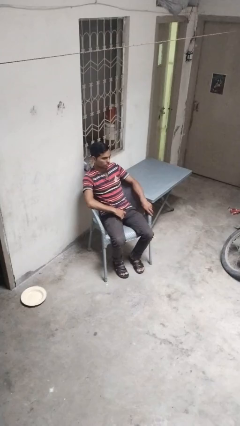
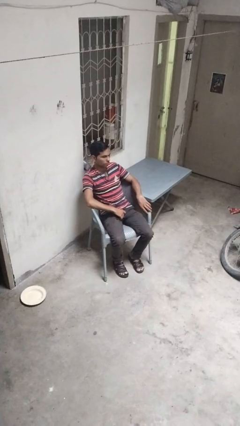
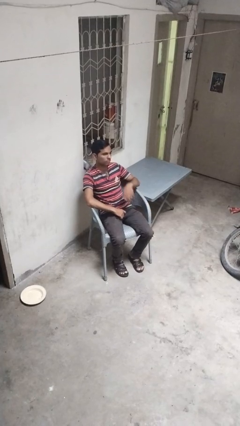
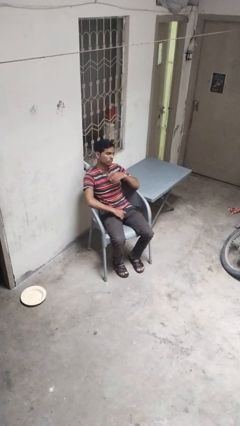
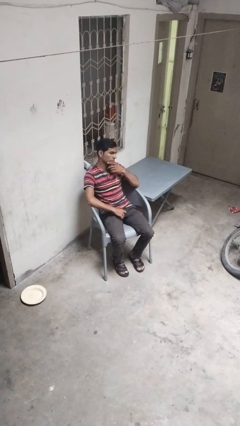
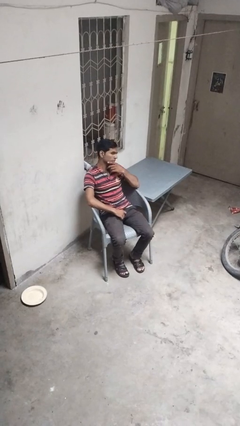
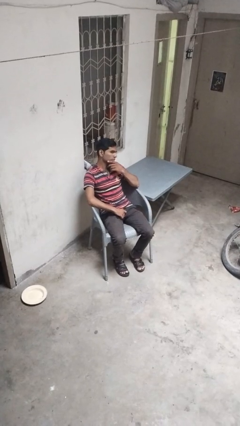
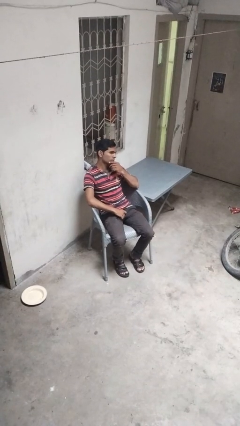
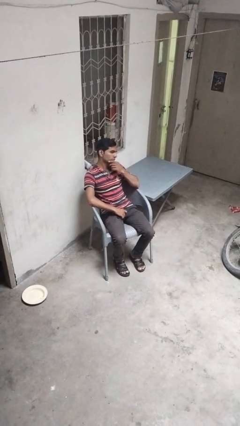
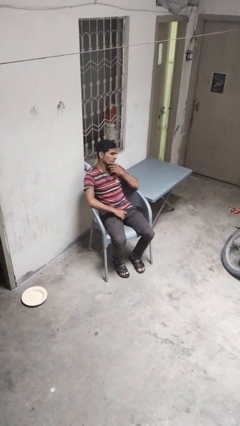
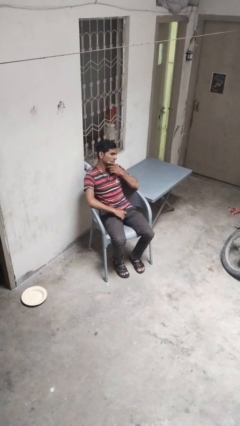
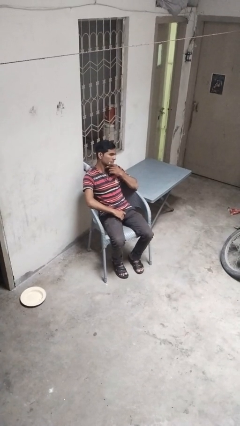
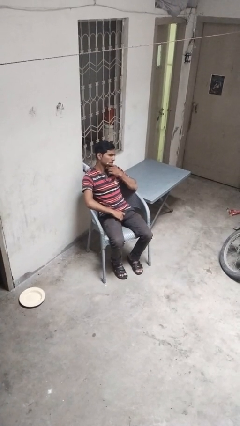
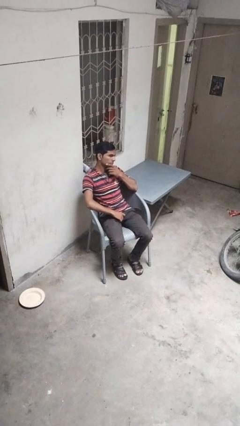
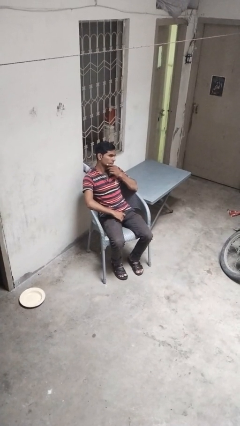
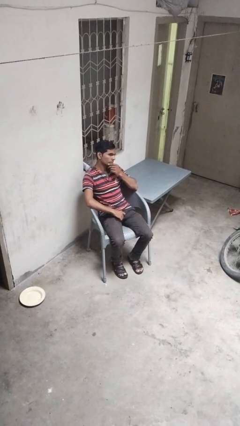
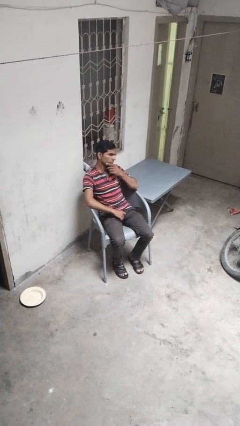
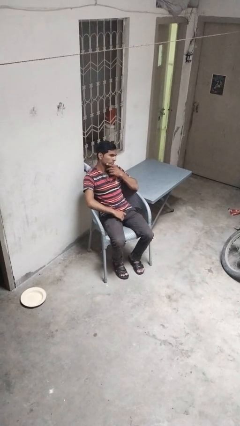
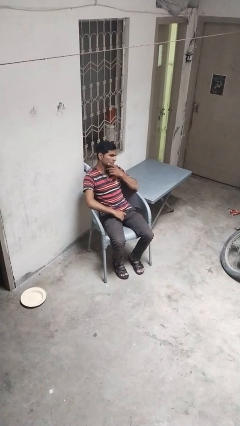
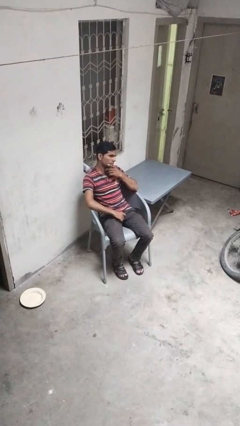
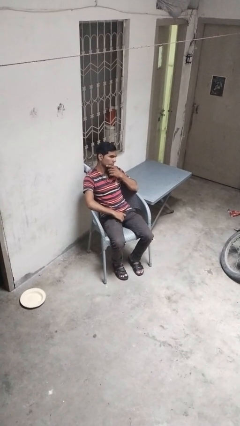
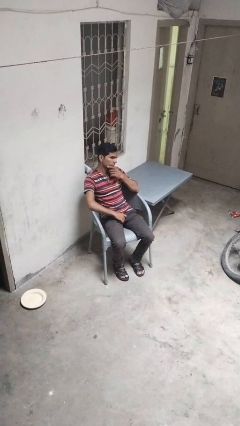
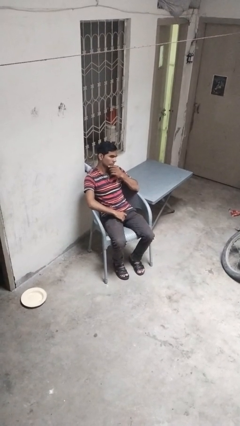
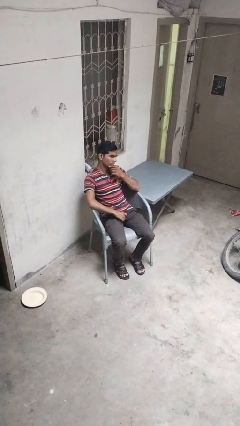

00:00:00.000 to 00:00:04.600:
person strokes chin

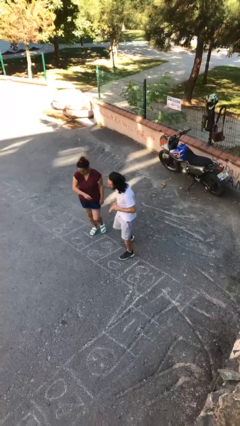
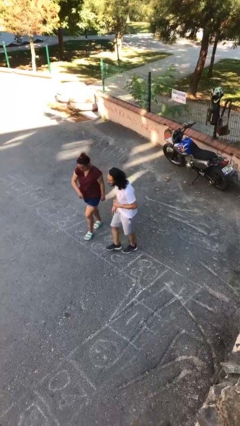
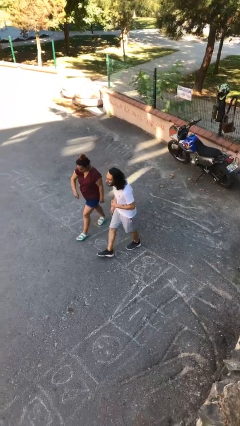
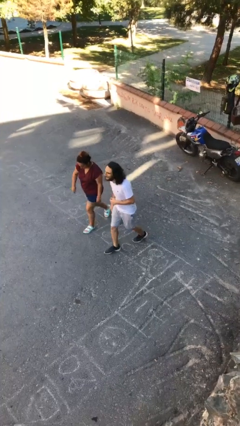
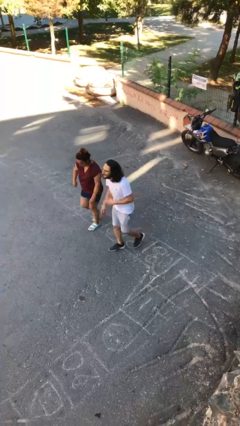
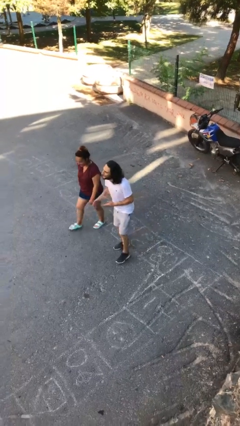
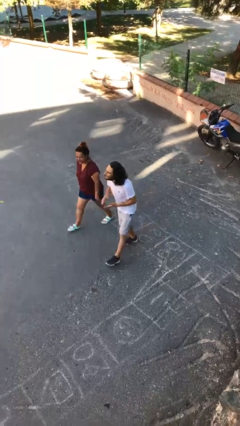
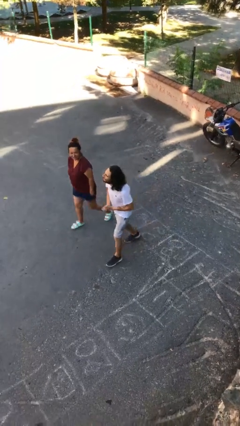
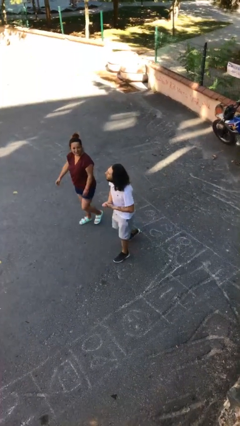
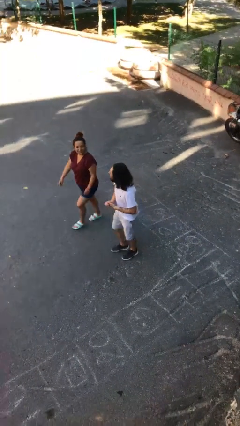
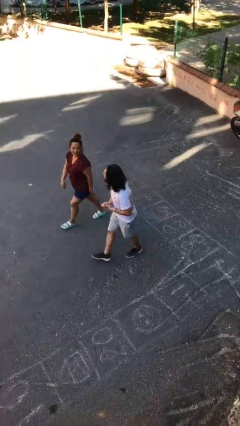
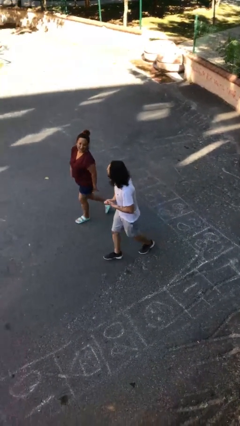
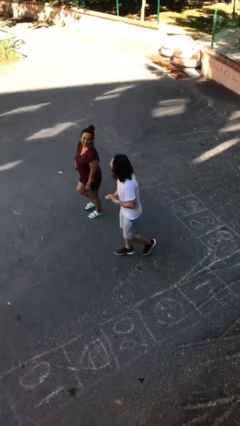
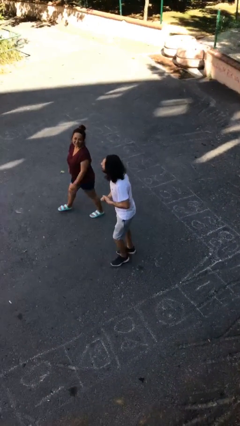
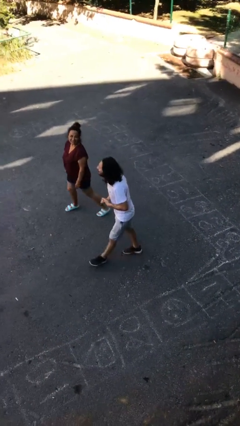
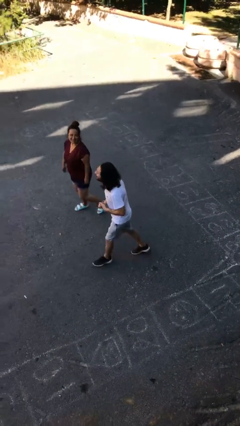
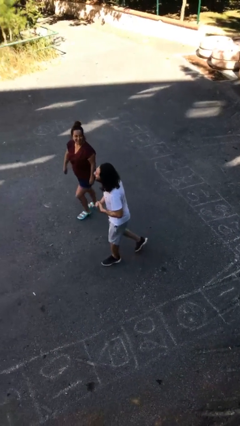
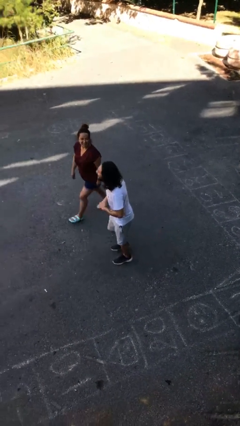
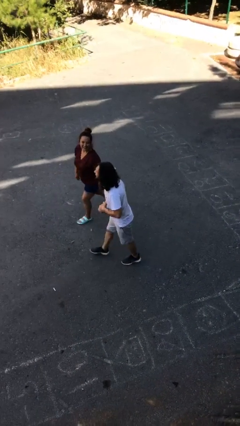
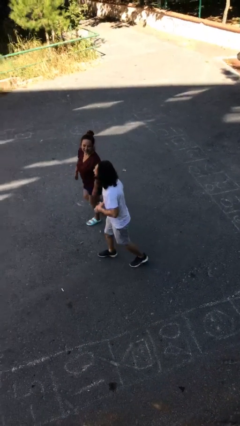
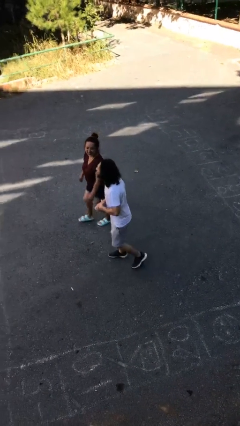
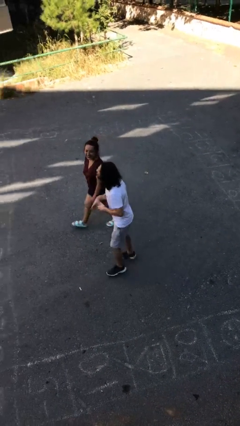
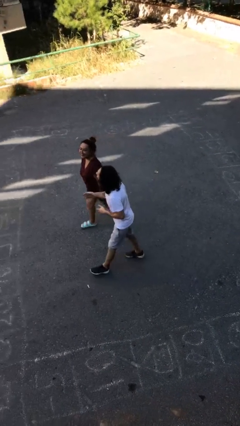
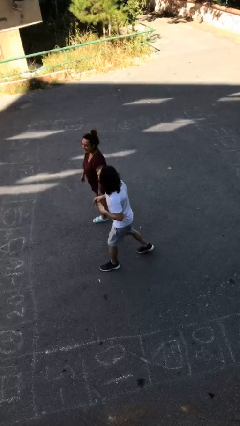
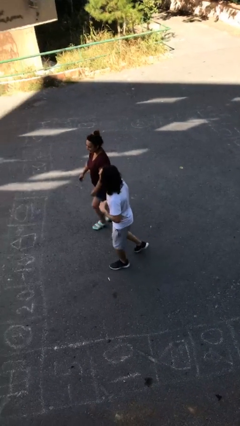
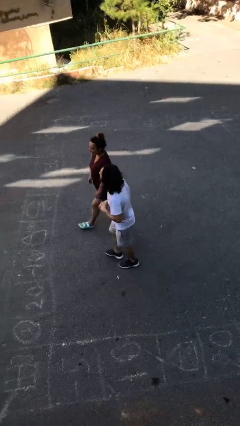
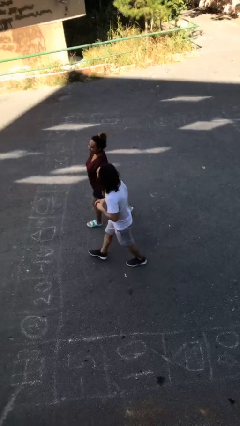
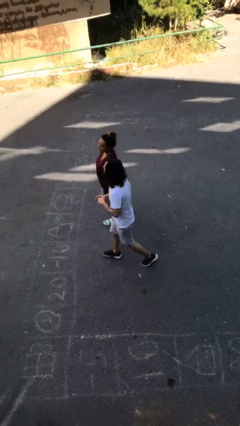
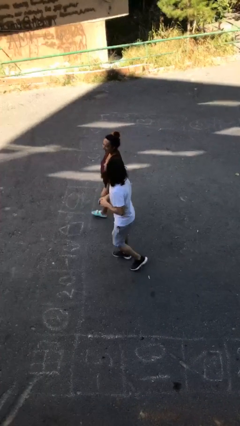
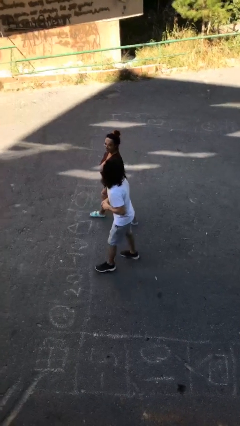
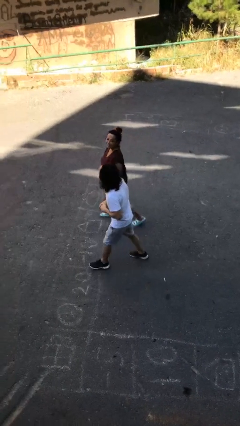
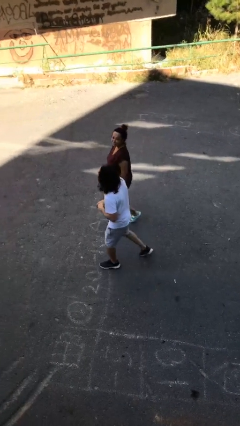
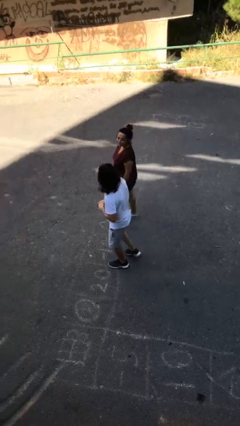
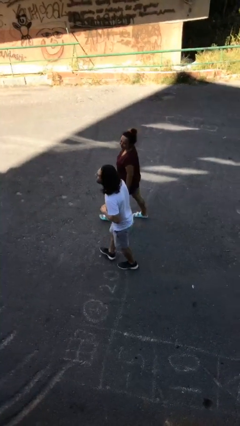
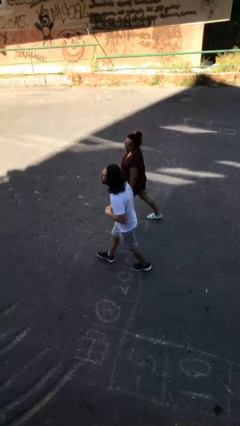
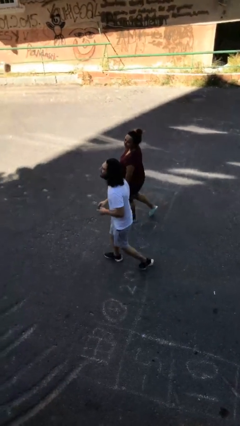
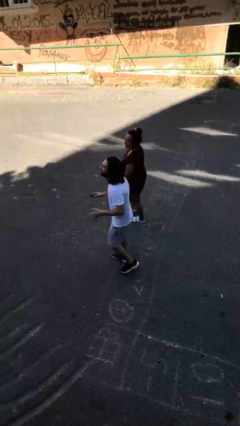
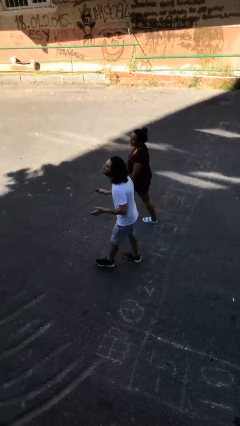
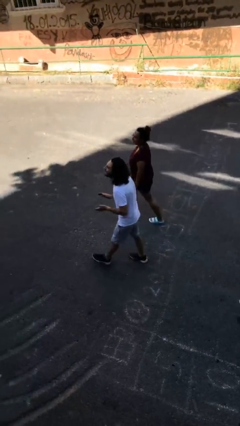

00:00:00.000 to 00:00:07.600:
person talks to person

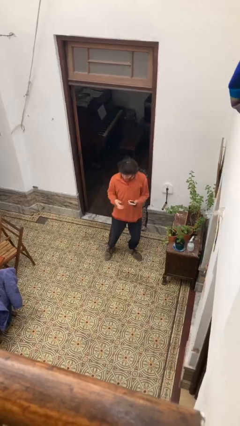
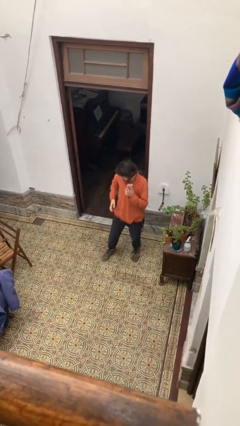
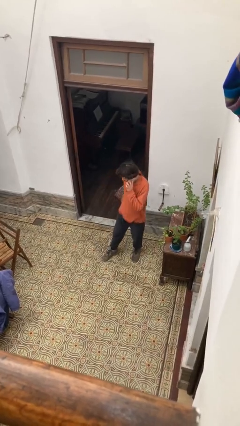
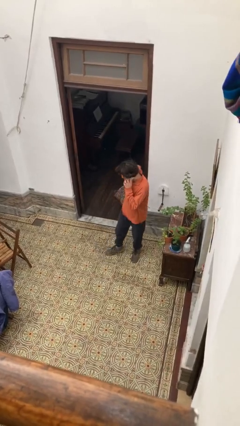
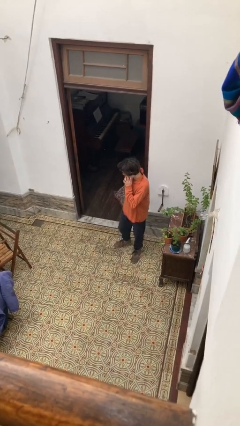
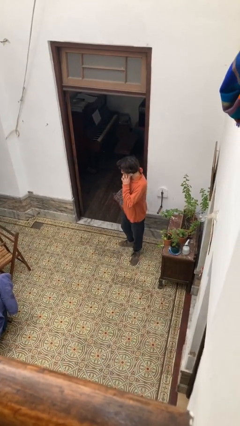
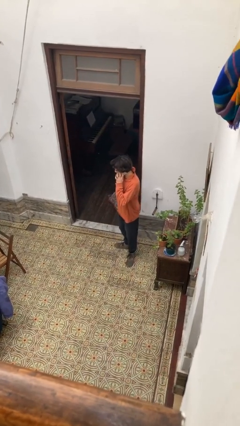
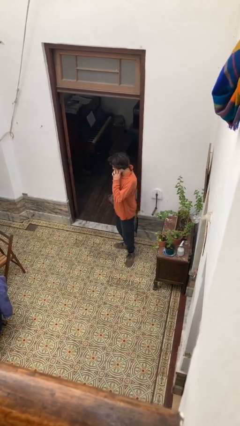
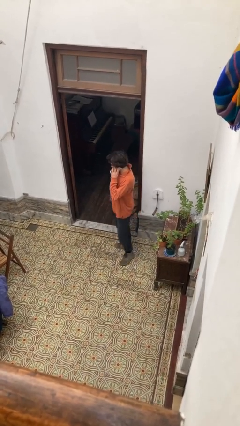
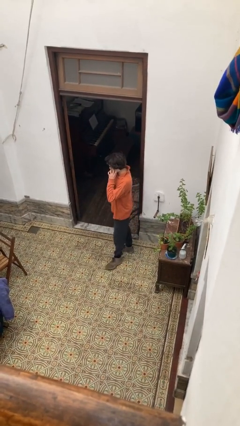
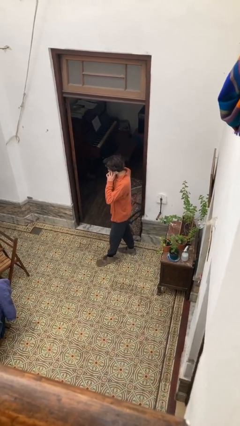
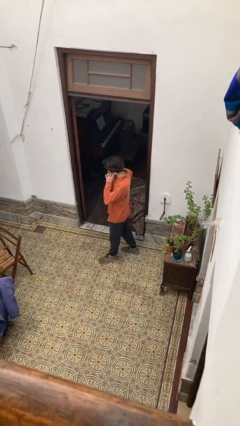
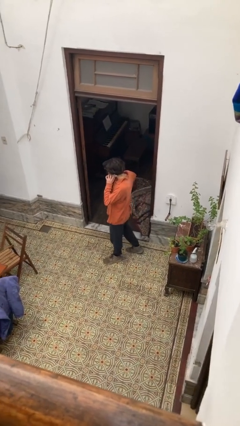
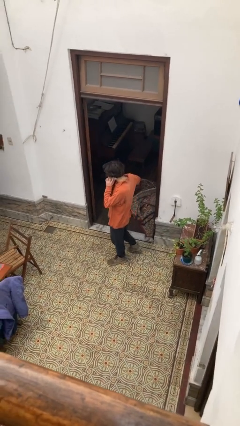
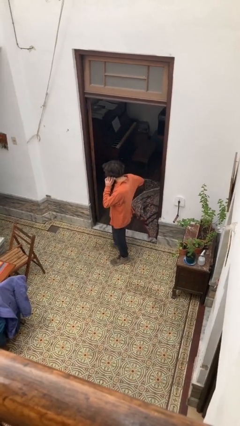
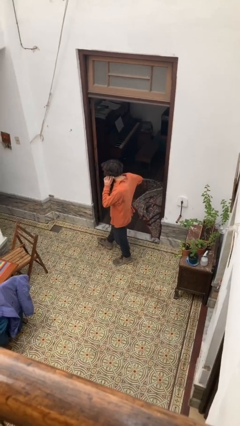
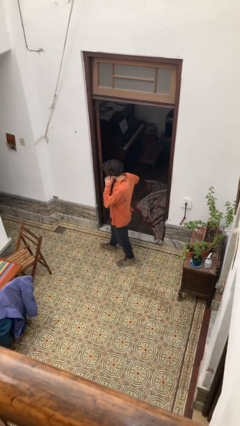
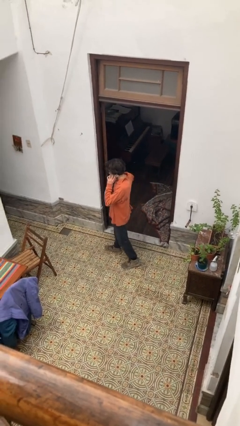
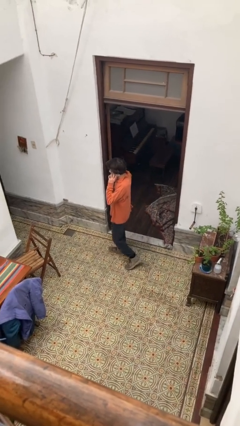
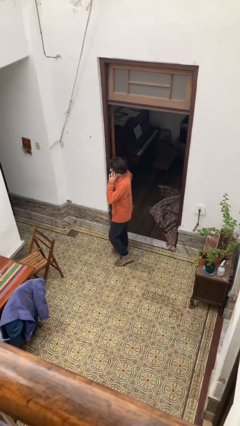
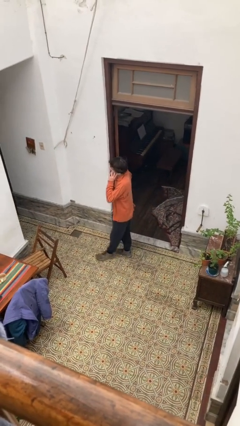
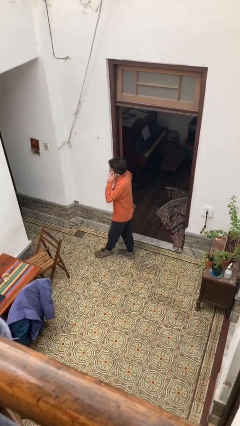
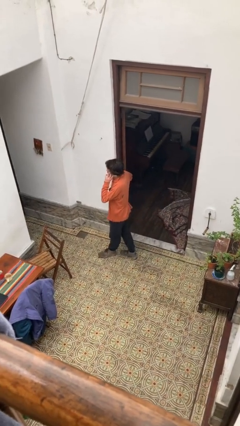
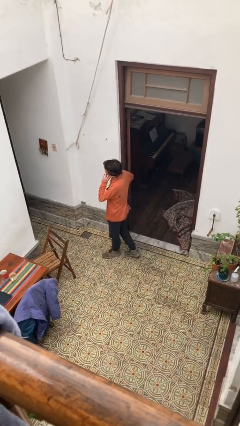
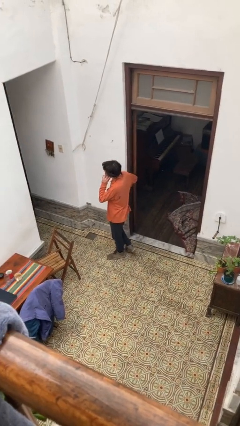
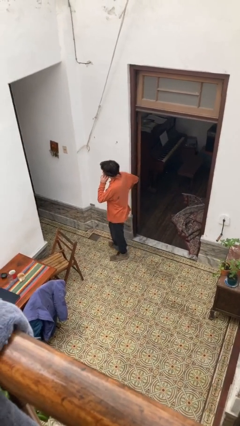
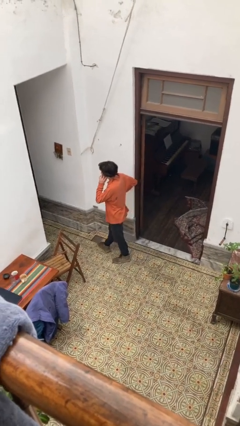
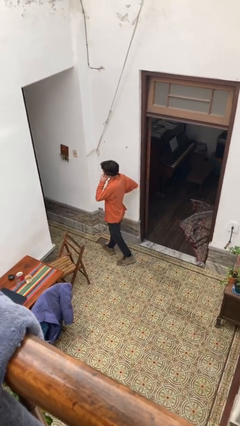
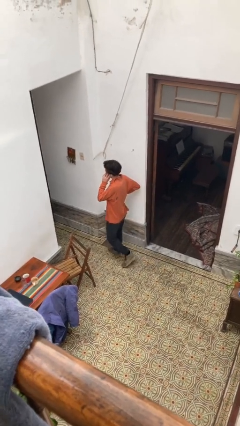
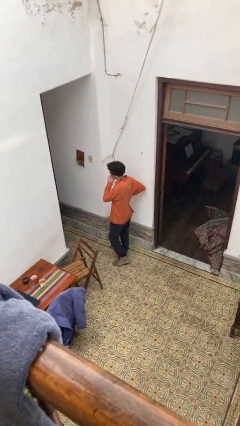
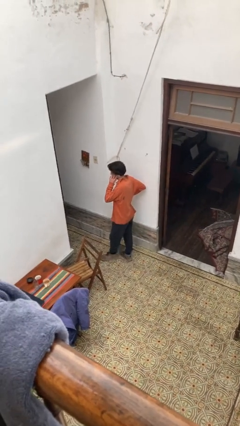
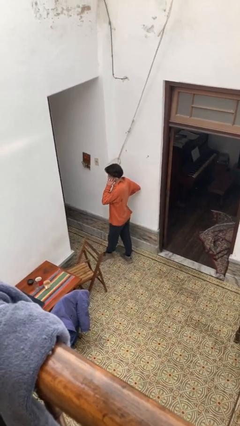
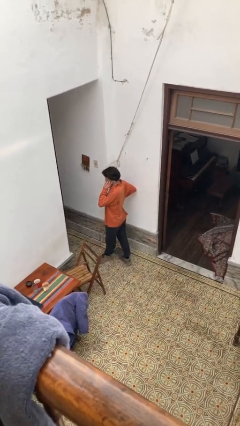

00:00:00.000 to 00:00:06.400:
person talks on phone
